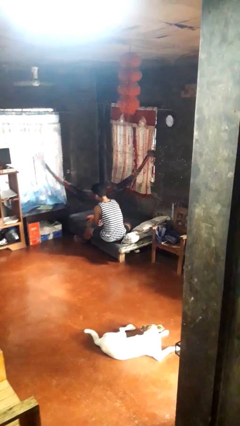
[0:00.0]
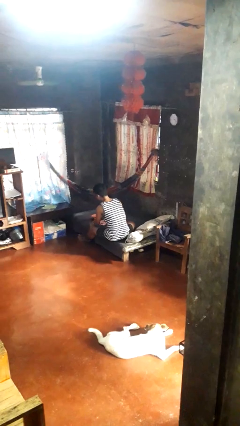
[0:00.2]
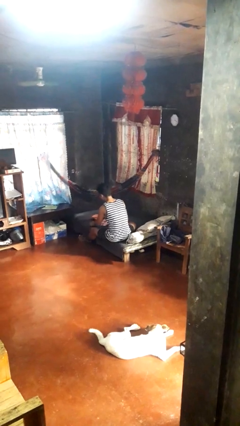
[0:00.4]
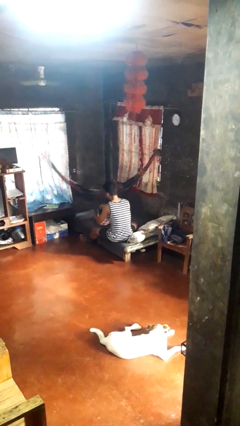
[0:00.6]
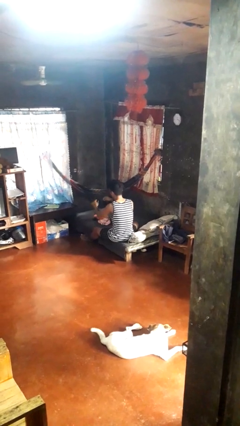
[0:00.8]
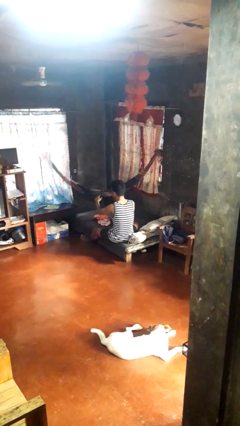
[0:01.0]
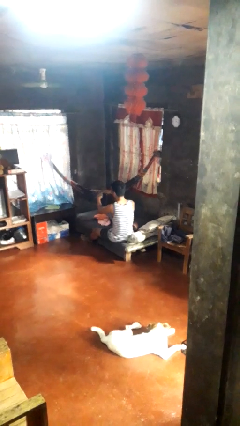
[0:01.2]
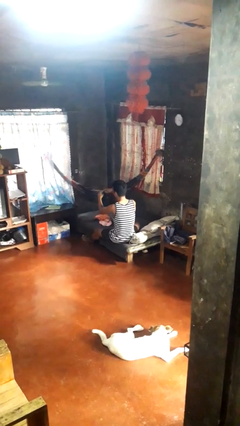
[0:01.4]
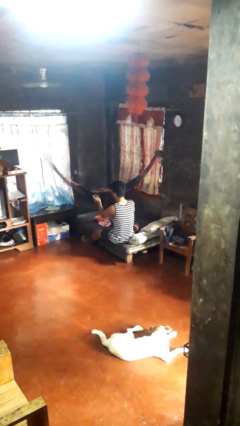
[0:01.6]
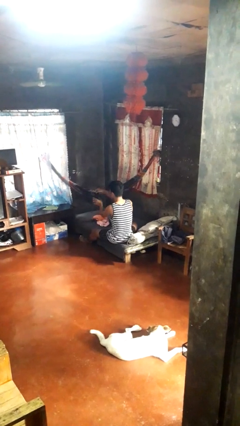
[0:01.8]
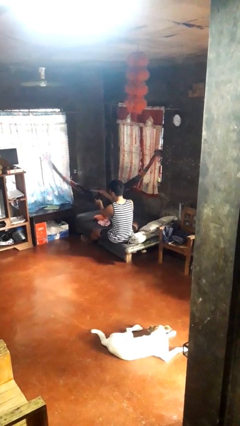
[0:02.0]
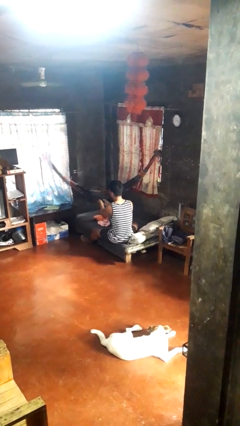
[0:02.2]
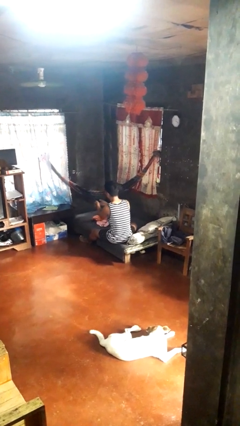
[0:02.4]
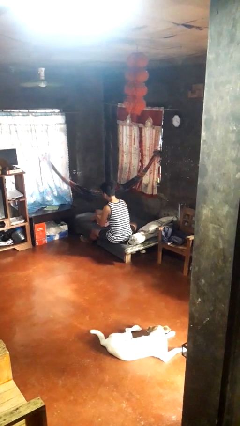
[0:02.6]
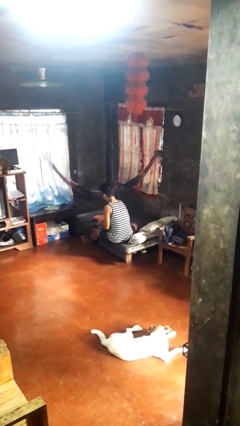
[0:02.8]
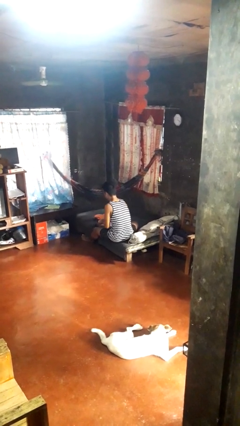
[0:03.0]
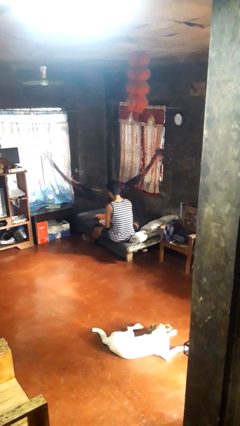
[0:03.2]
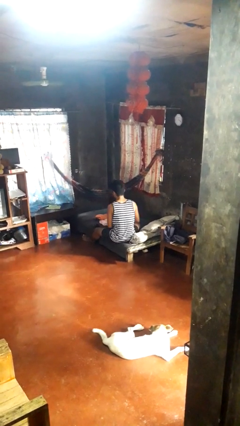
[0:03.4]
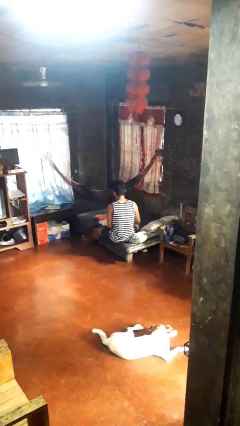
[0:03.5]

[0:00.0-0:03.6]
person folds socks

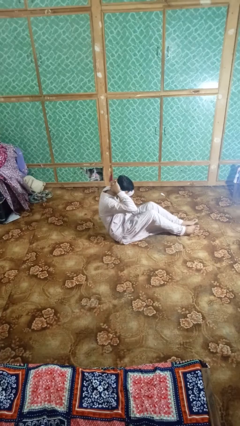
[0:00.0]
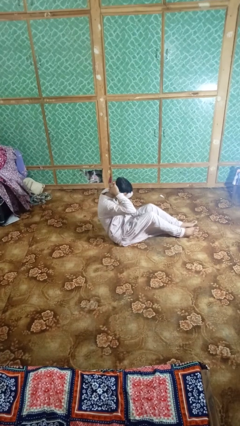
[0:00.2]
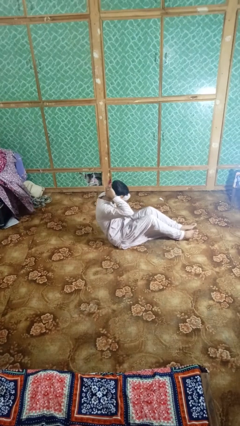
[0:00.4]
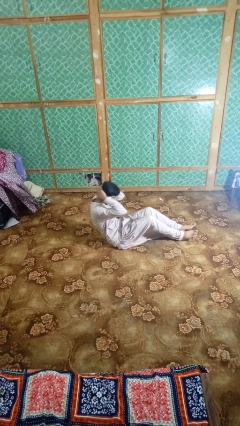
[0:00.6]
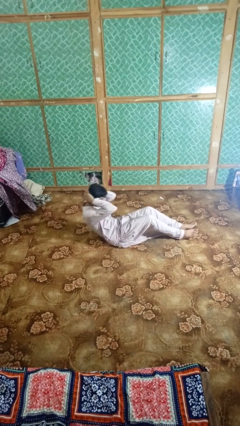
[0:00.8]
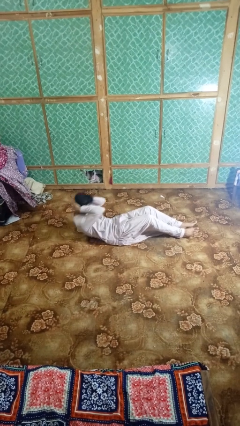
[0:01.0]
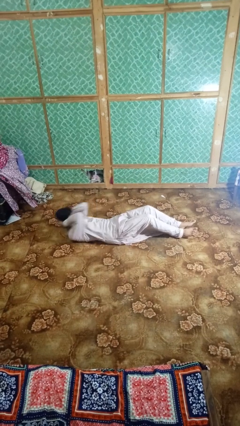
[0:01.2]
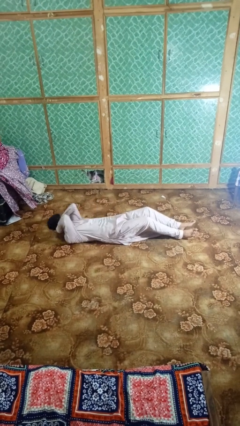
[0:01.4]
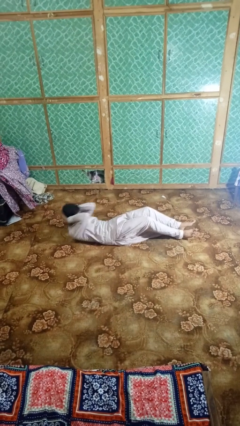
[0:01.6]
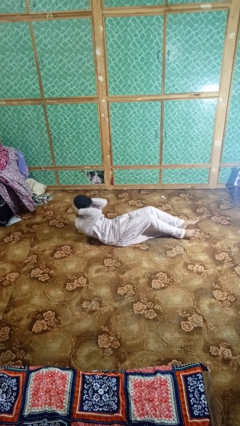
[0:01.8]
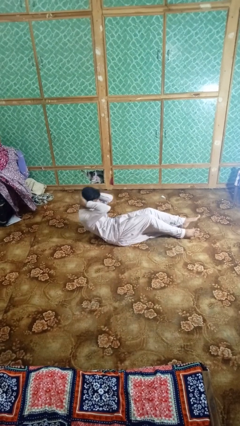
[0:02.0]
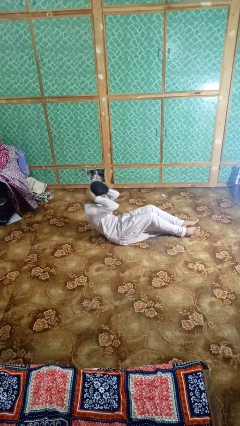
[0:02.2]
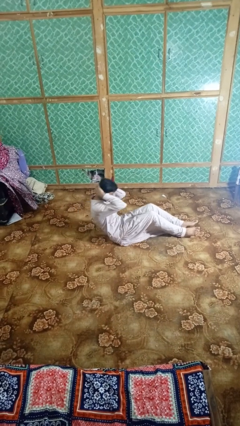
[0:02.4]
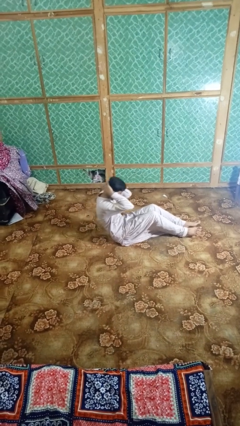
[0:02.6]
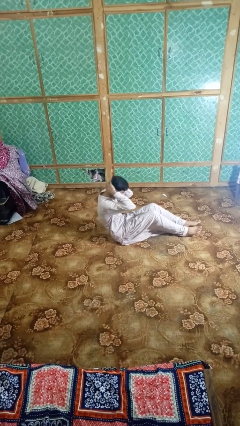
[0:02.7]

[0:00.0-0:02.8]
person exercises with situp

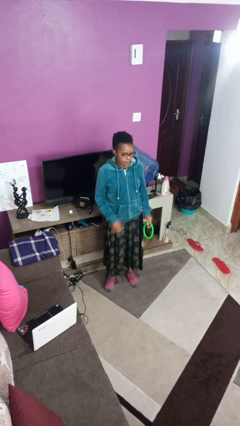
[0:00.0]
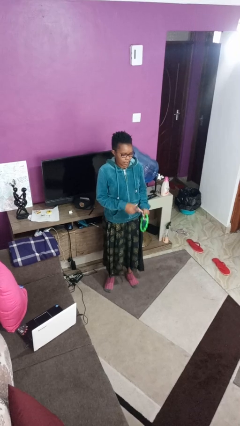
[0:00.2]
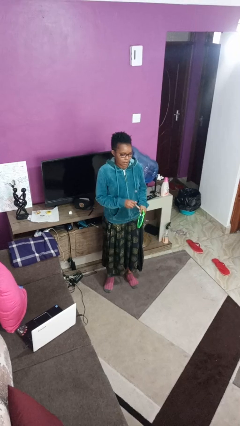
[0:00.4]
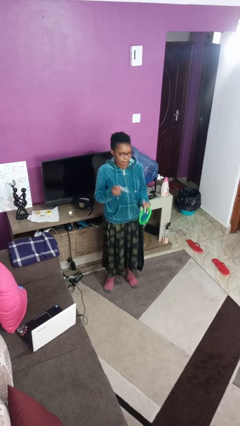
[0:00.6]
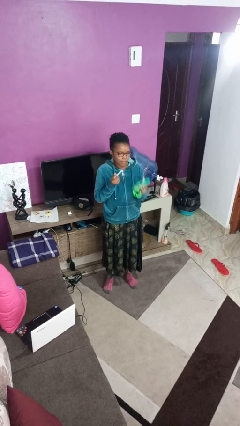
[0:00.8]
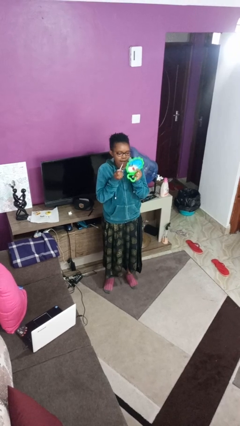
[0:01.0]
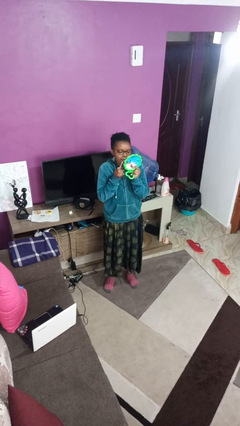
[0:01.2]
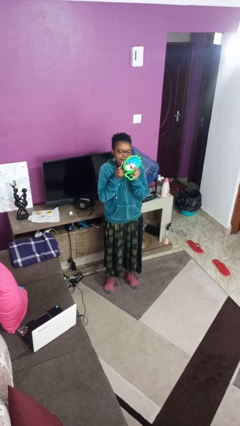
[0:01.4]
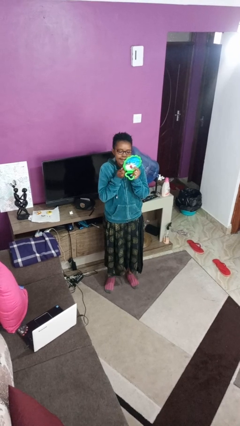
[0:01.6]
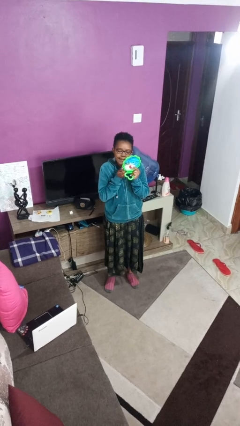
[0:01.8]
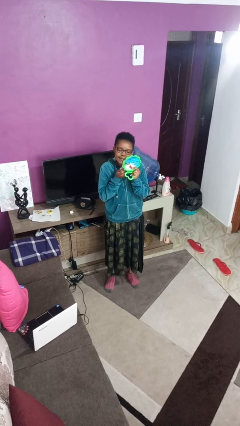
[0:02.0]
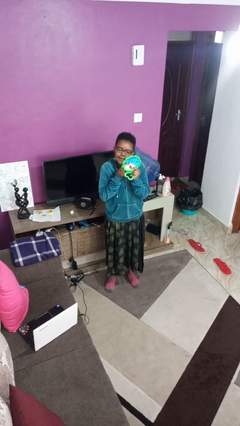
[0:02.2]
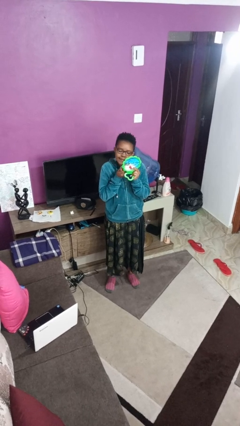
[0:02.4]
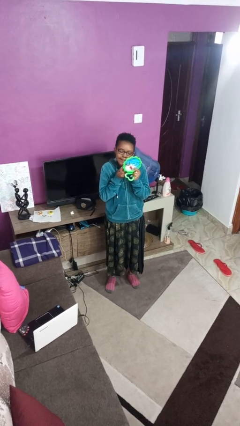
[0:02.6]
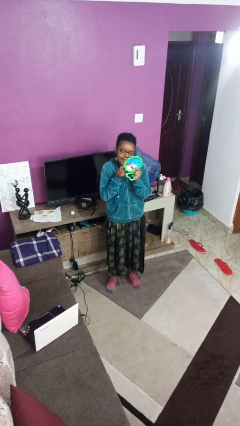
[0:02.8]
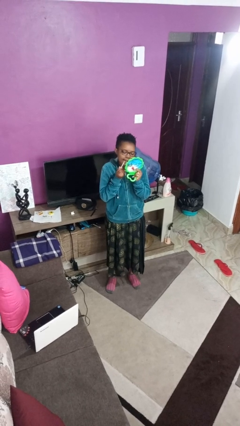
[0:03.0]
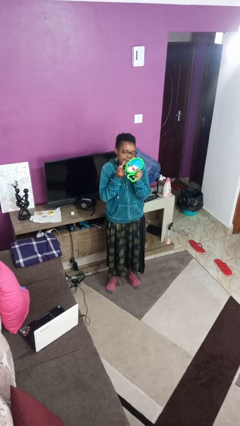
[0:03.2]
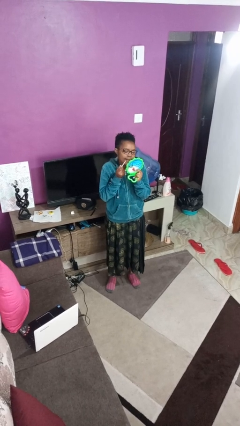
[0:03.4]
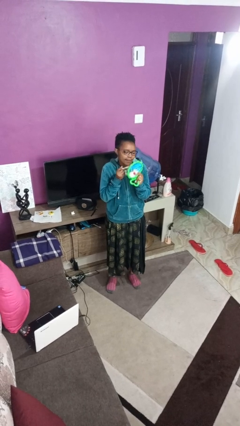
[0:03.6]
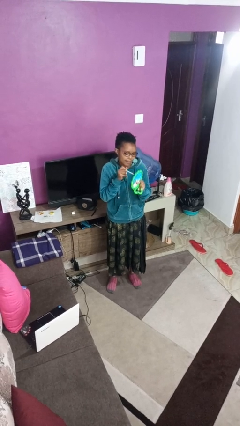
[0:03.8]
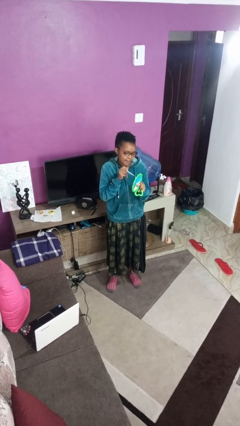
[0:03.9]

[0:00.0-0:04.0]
person applies lip makeup

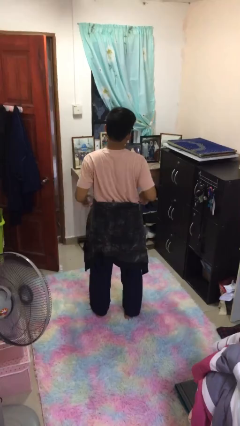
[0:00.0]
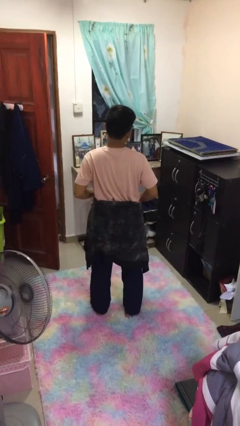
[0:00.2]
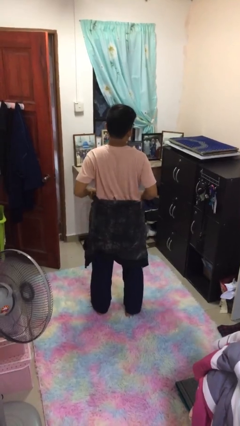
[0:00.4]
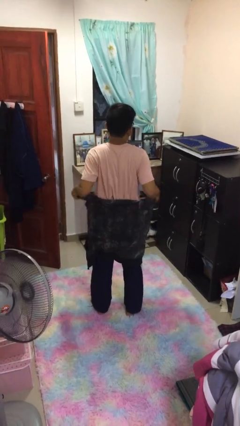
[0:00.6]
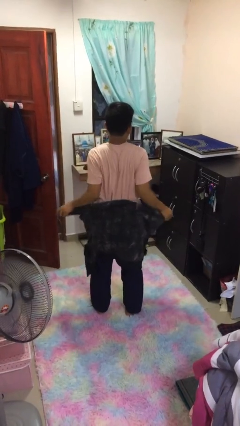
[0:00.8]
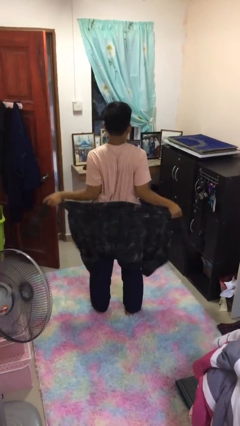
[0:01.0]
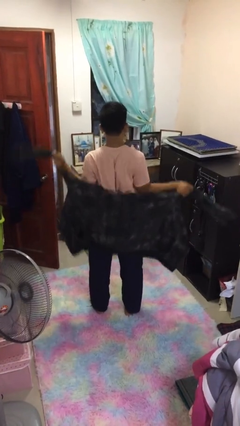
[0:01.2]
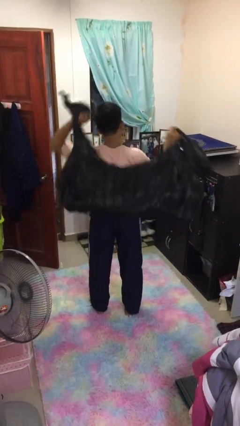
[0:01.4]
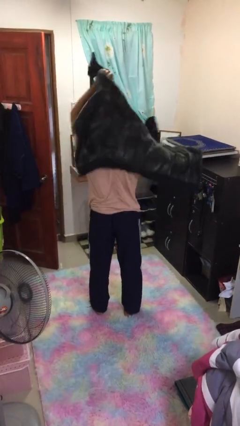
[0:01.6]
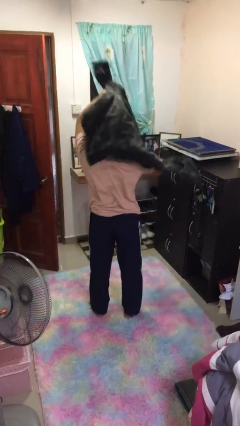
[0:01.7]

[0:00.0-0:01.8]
person unties jacket around waist

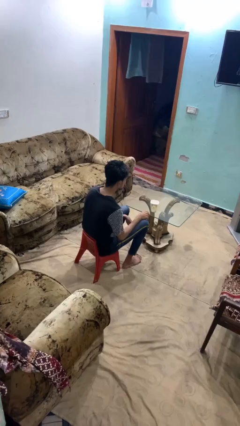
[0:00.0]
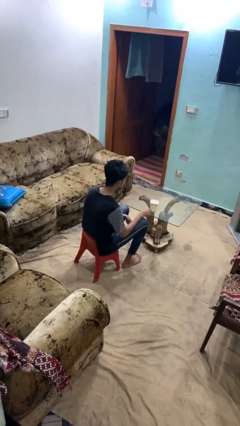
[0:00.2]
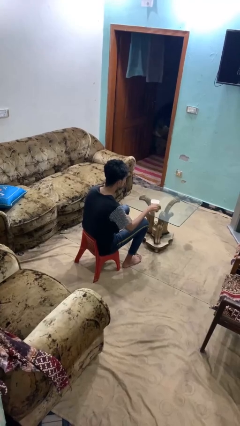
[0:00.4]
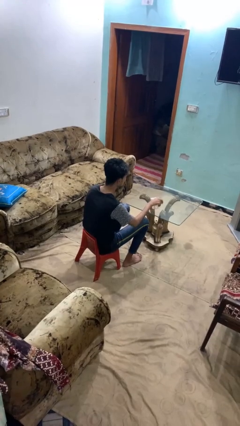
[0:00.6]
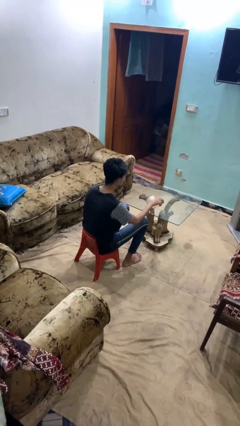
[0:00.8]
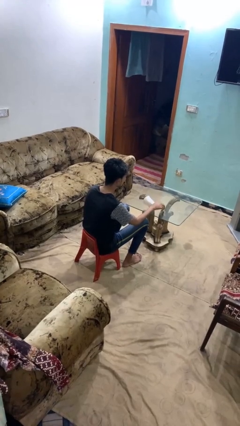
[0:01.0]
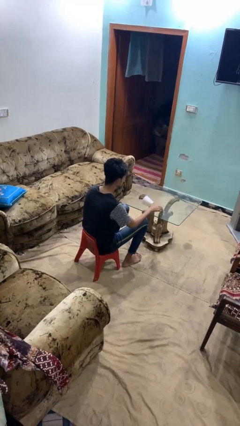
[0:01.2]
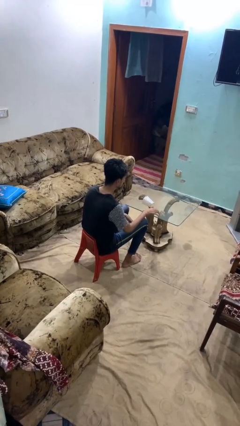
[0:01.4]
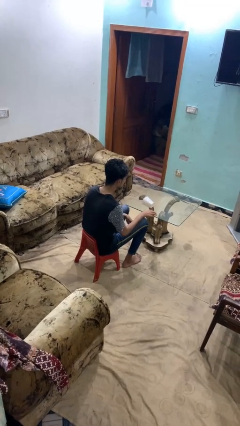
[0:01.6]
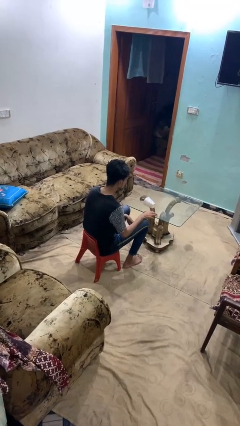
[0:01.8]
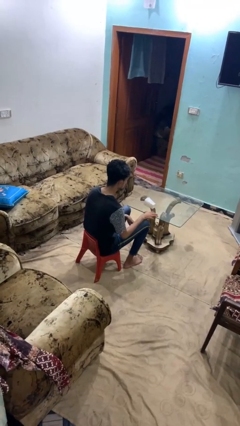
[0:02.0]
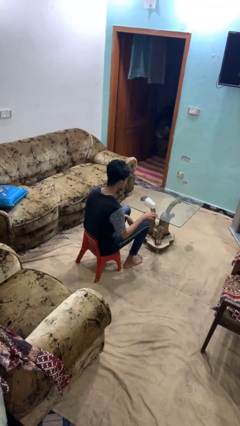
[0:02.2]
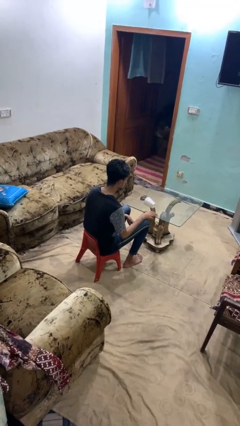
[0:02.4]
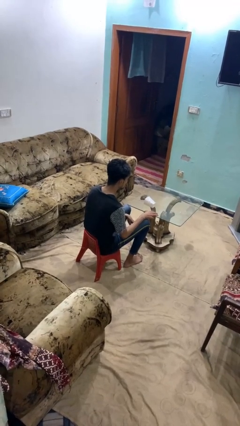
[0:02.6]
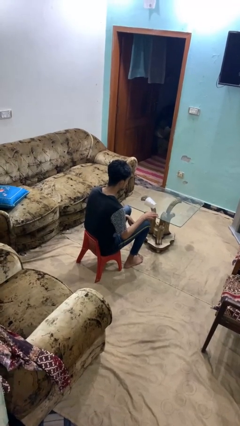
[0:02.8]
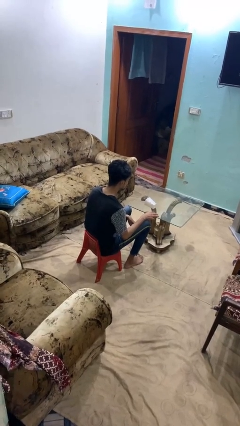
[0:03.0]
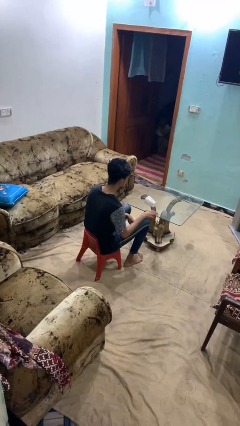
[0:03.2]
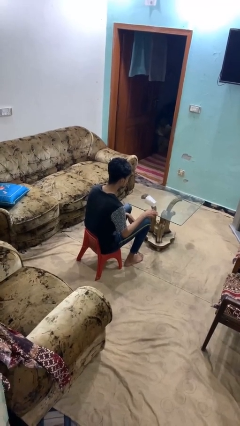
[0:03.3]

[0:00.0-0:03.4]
person knocks over glass

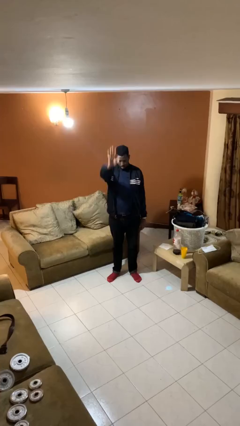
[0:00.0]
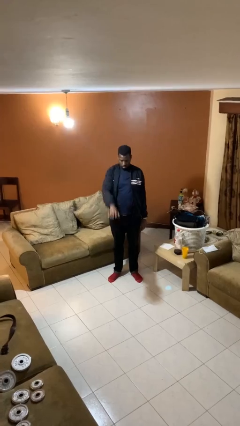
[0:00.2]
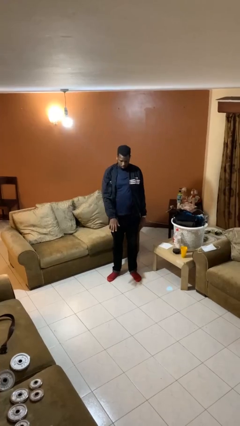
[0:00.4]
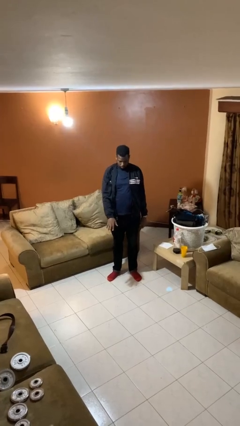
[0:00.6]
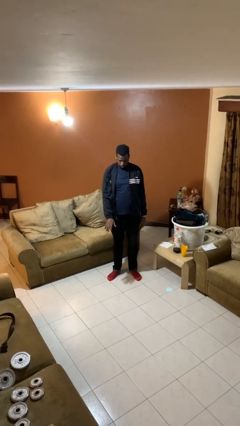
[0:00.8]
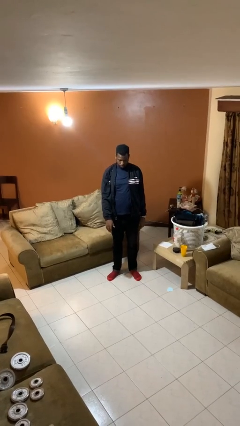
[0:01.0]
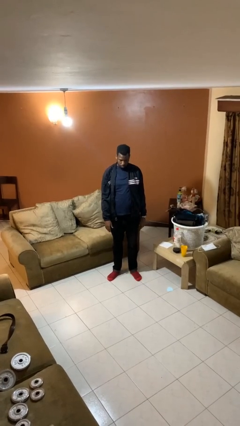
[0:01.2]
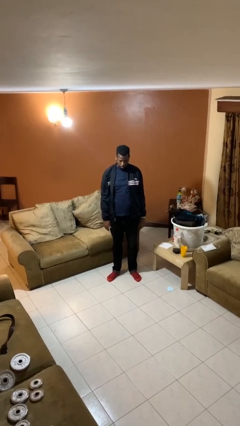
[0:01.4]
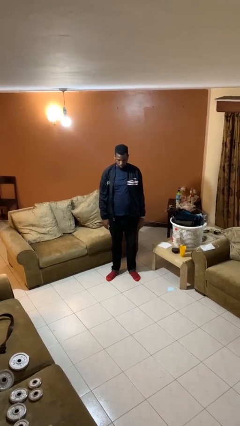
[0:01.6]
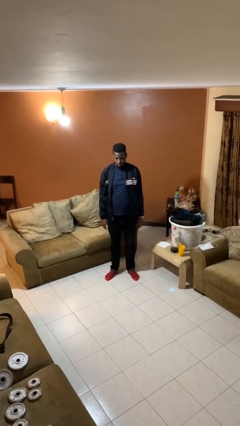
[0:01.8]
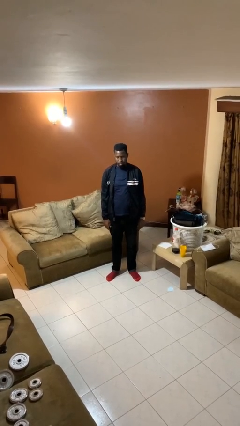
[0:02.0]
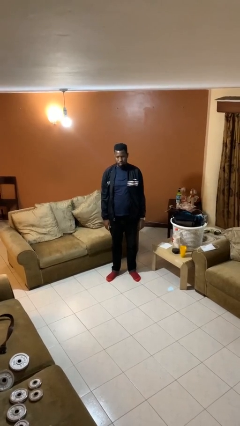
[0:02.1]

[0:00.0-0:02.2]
person gestures swipe down
